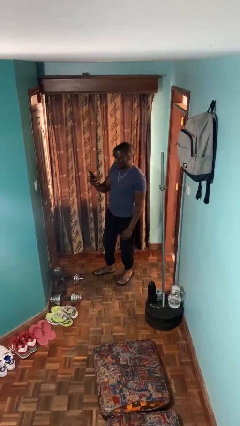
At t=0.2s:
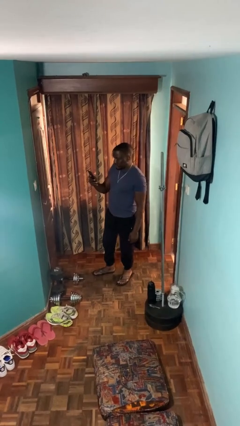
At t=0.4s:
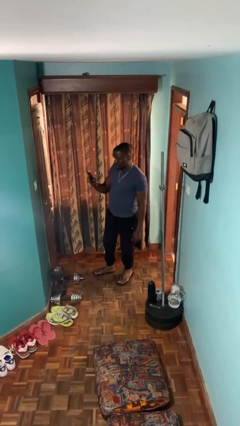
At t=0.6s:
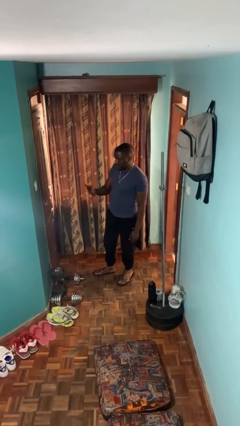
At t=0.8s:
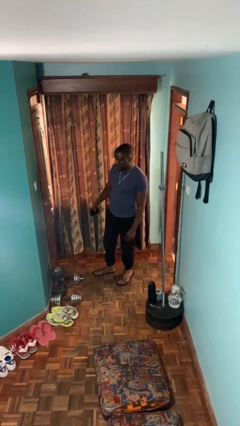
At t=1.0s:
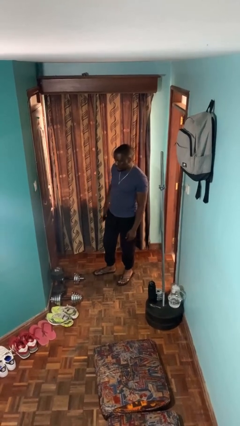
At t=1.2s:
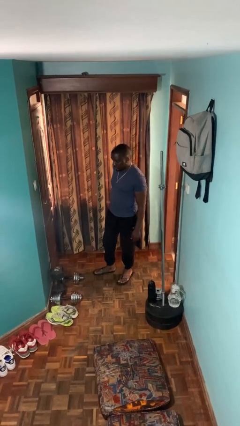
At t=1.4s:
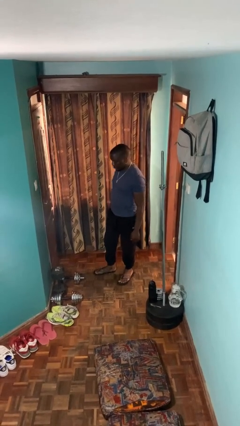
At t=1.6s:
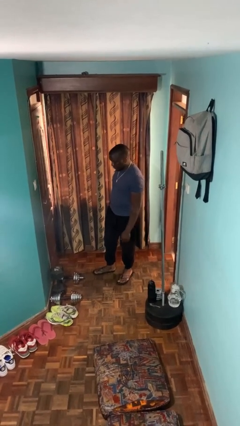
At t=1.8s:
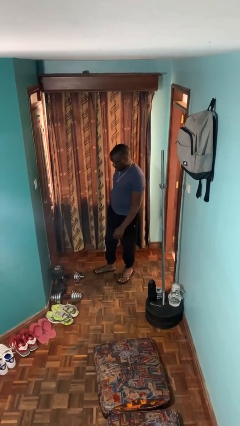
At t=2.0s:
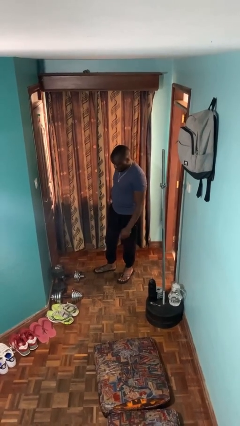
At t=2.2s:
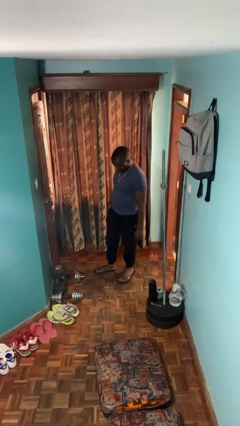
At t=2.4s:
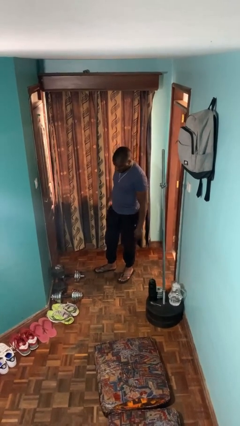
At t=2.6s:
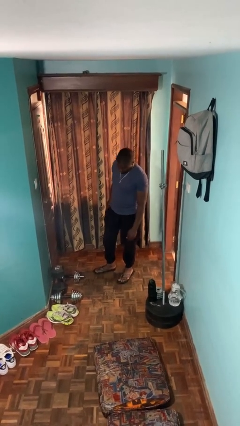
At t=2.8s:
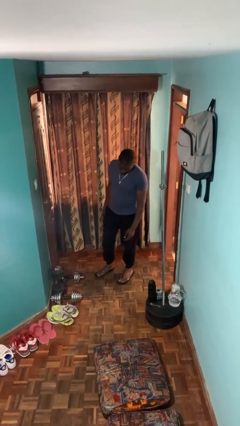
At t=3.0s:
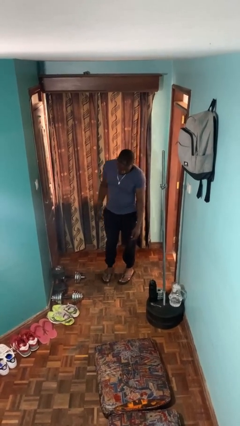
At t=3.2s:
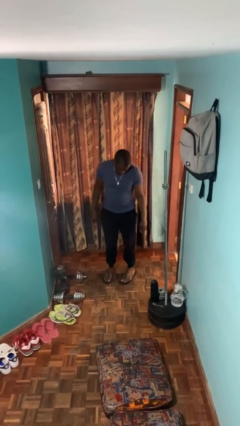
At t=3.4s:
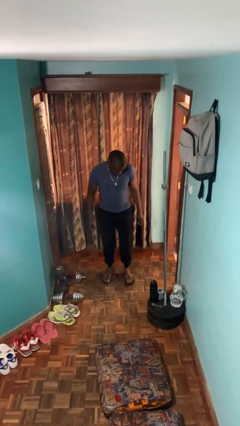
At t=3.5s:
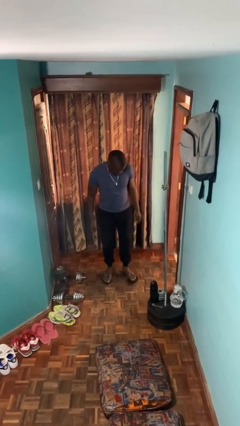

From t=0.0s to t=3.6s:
person puts phone into pocket

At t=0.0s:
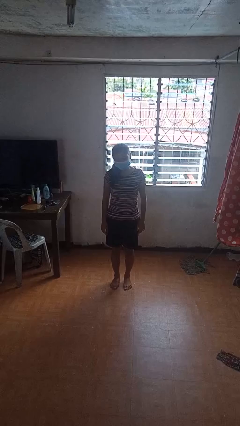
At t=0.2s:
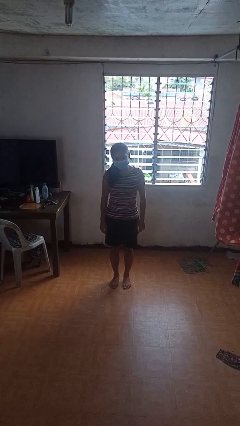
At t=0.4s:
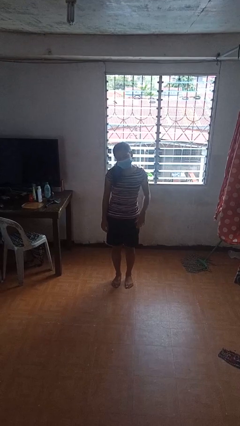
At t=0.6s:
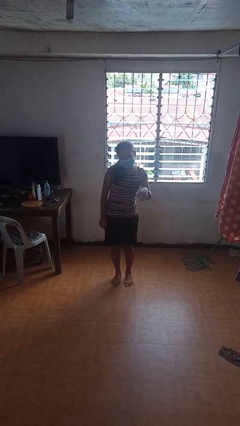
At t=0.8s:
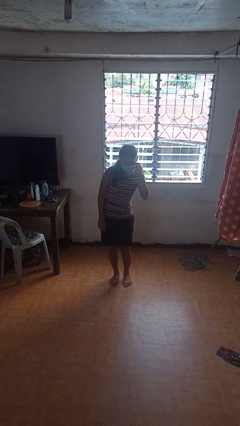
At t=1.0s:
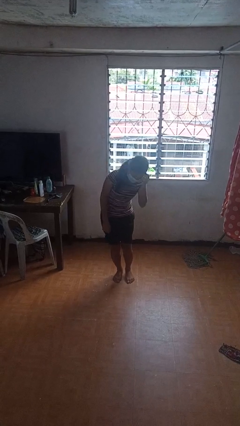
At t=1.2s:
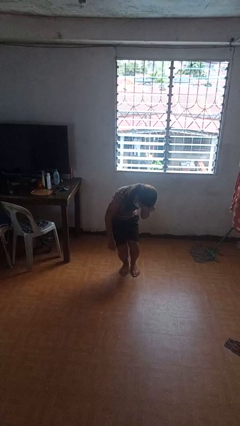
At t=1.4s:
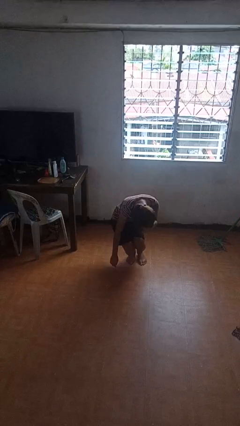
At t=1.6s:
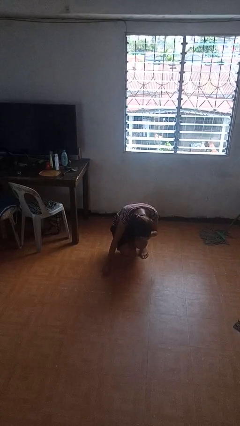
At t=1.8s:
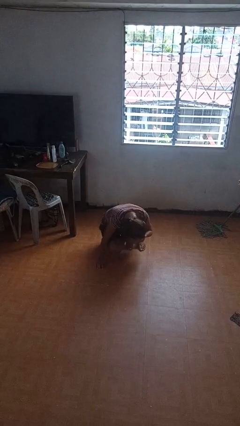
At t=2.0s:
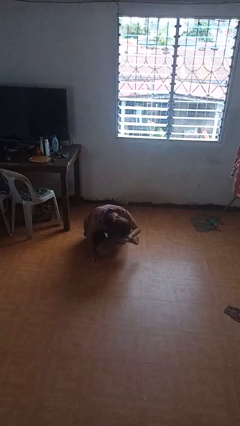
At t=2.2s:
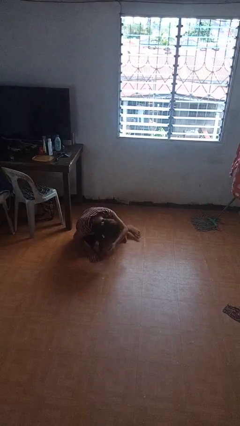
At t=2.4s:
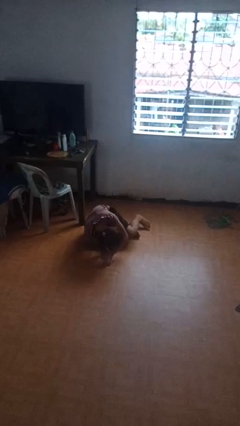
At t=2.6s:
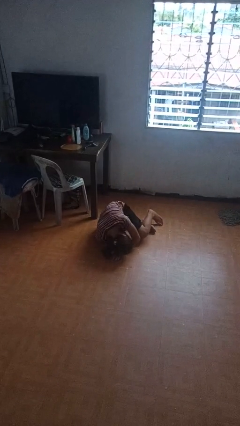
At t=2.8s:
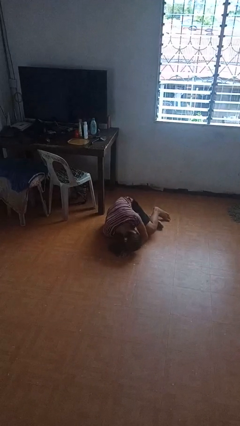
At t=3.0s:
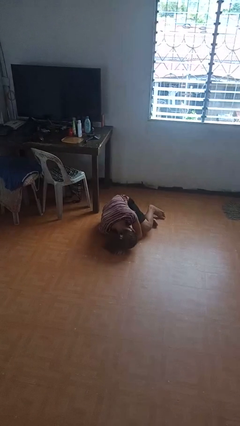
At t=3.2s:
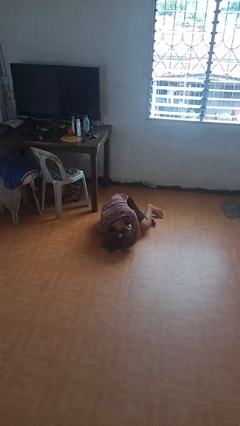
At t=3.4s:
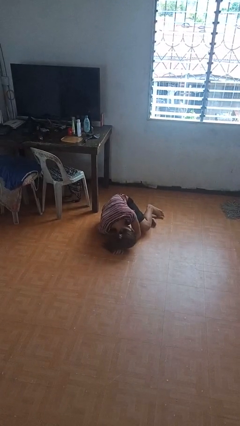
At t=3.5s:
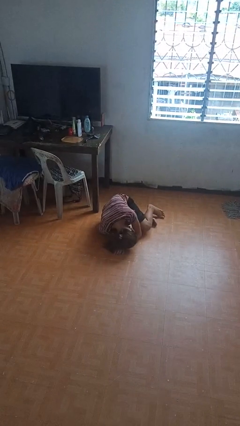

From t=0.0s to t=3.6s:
person falls while standing

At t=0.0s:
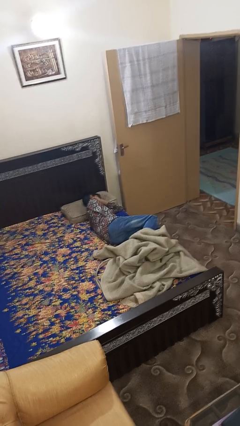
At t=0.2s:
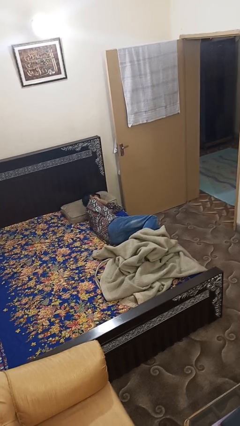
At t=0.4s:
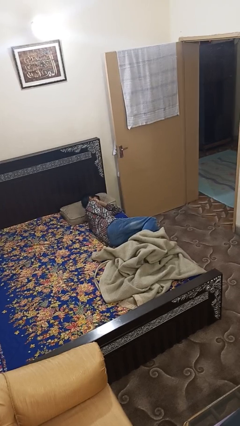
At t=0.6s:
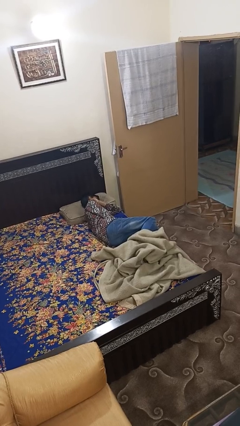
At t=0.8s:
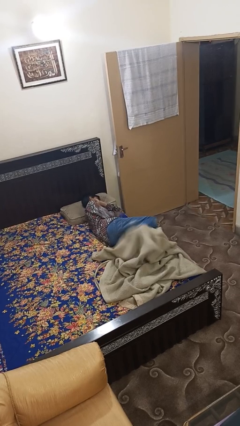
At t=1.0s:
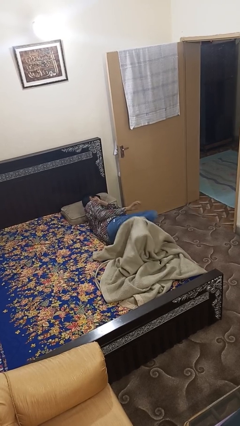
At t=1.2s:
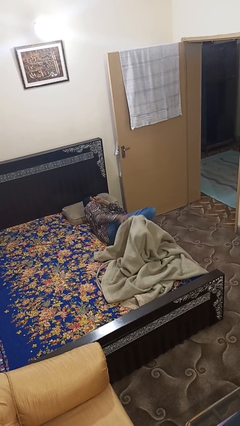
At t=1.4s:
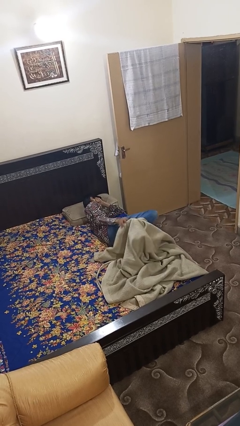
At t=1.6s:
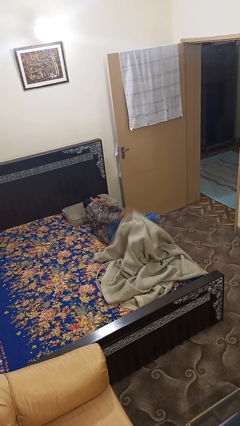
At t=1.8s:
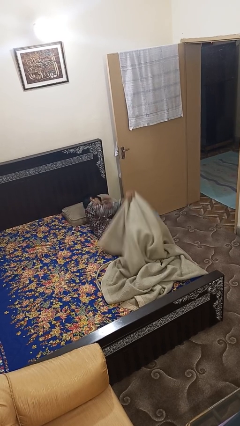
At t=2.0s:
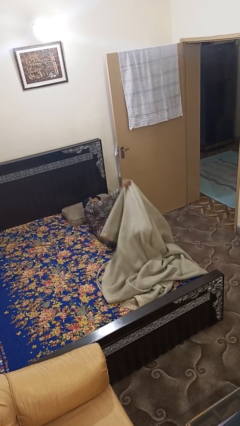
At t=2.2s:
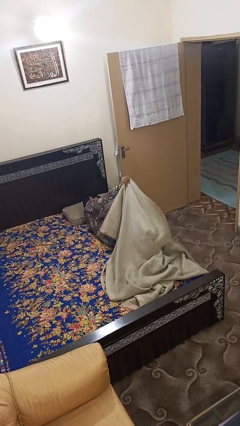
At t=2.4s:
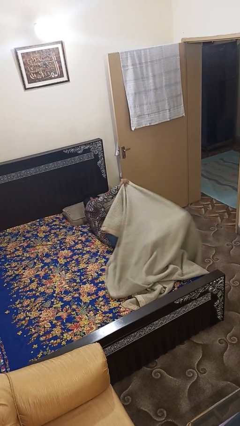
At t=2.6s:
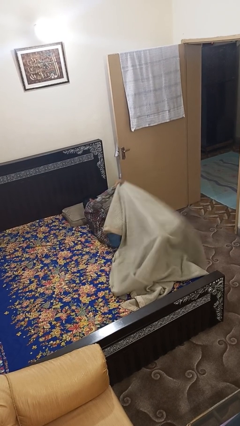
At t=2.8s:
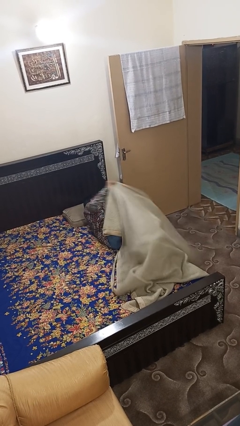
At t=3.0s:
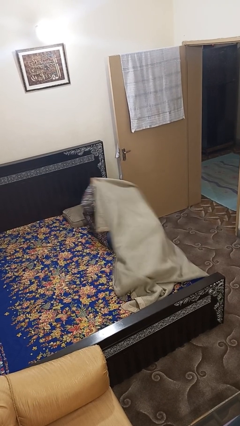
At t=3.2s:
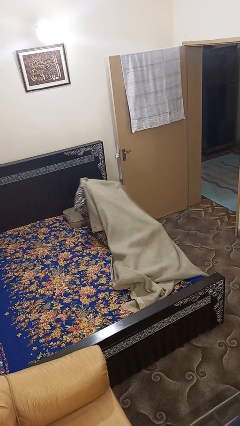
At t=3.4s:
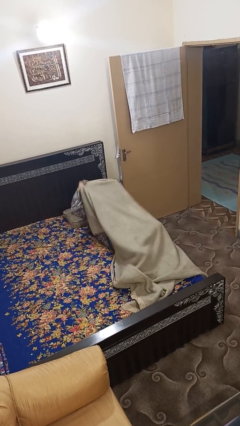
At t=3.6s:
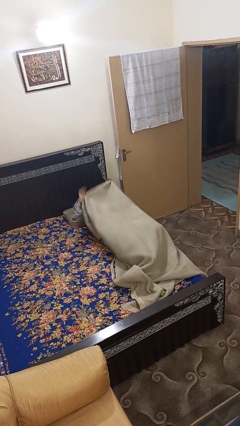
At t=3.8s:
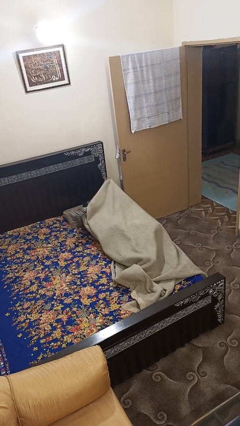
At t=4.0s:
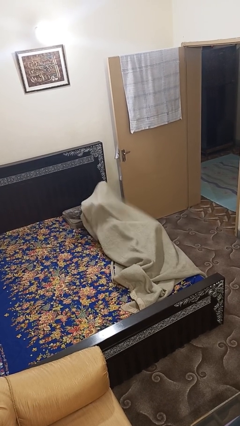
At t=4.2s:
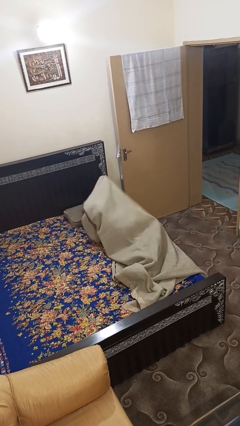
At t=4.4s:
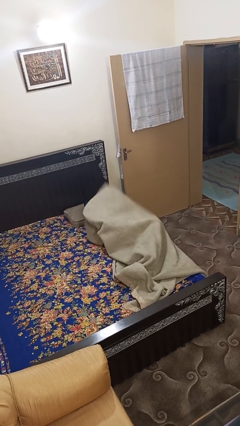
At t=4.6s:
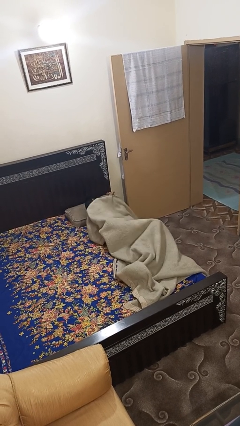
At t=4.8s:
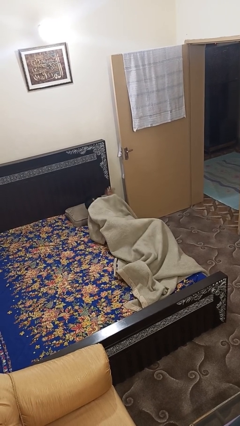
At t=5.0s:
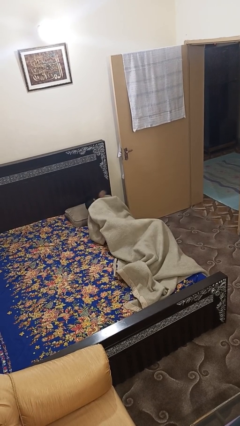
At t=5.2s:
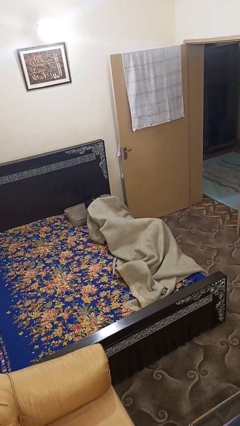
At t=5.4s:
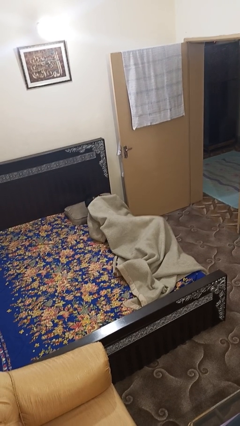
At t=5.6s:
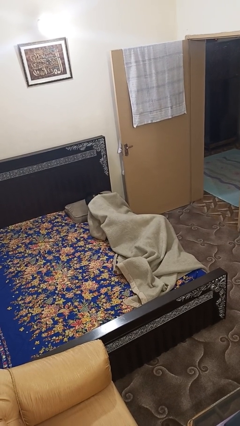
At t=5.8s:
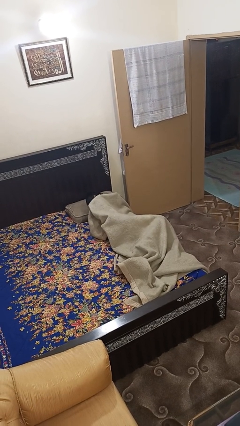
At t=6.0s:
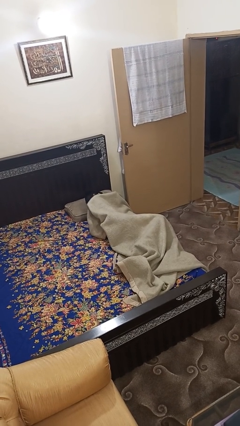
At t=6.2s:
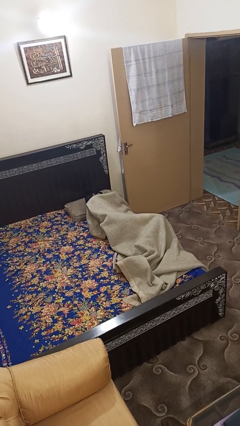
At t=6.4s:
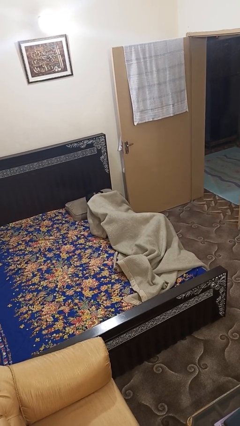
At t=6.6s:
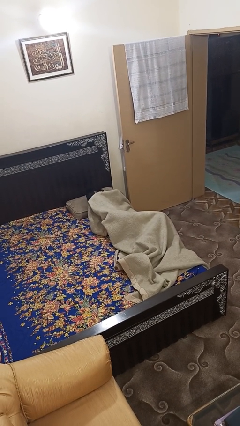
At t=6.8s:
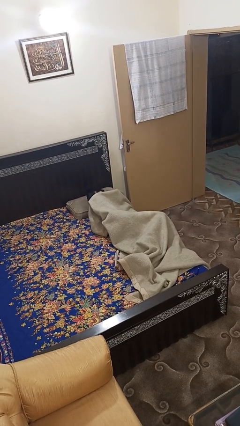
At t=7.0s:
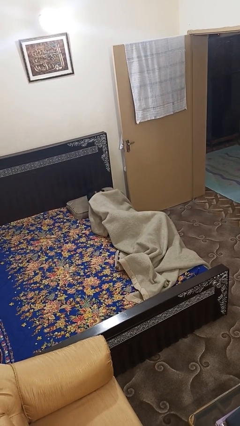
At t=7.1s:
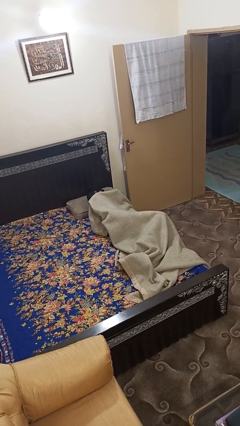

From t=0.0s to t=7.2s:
person covers with bedsheets

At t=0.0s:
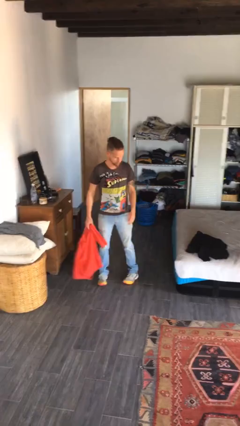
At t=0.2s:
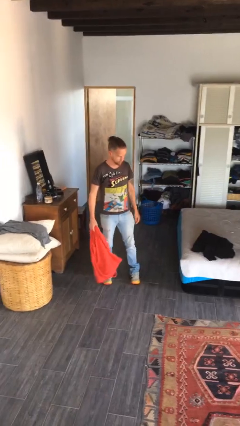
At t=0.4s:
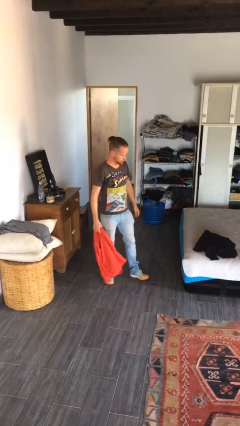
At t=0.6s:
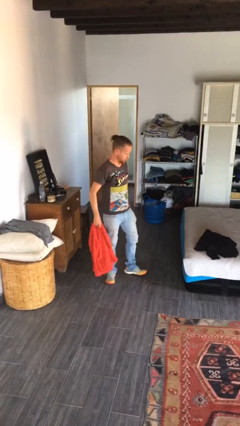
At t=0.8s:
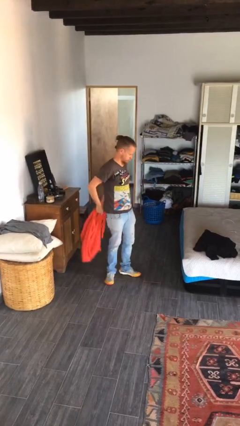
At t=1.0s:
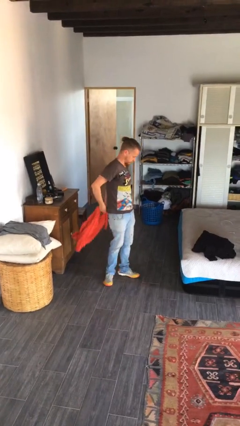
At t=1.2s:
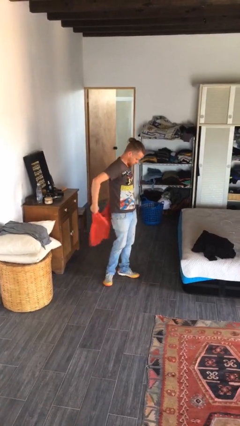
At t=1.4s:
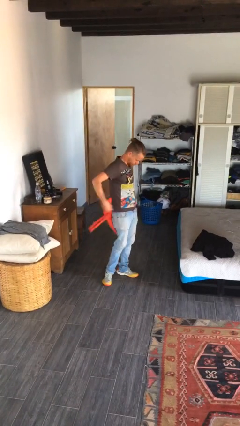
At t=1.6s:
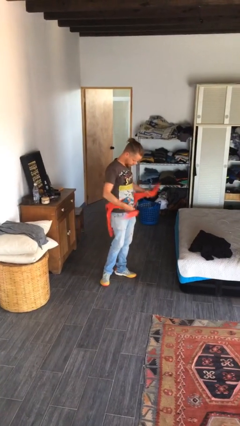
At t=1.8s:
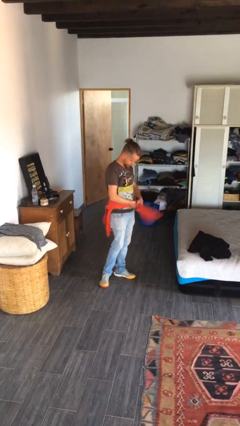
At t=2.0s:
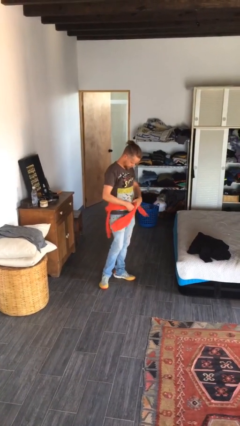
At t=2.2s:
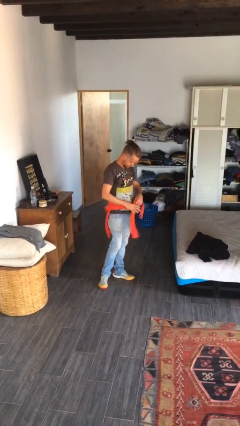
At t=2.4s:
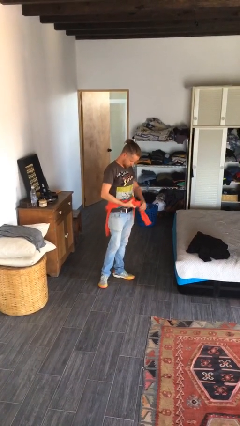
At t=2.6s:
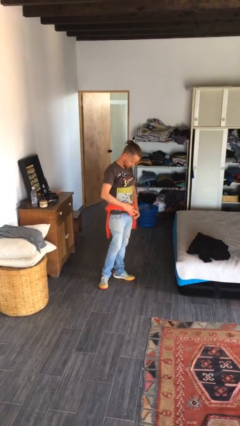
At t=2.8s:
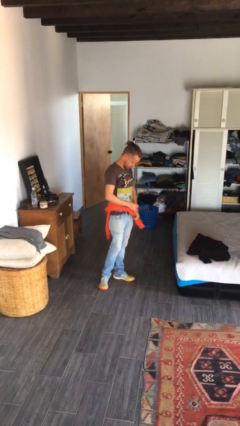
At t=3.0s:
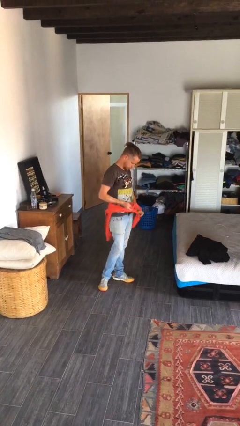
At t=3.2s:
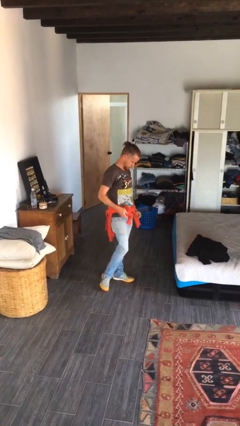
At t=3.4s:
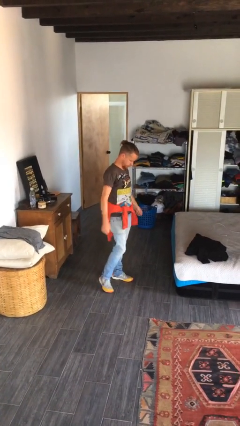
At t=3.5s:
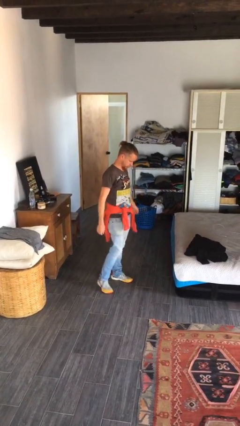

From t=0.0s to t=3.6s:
person ties jacket around waist
